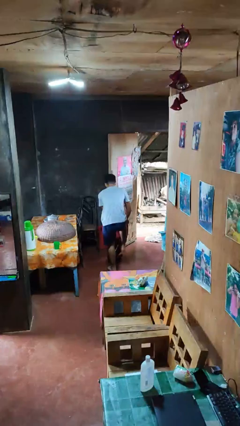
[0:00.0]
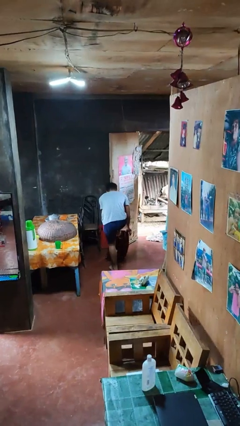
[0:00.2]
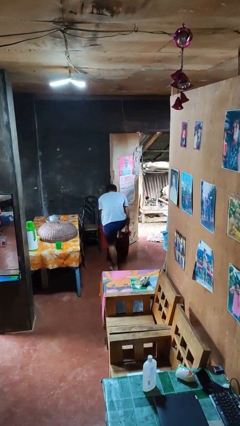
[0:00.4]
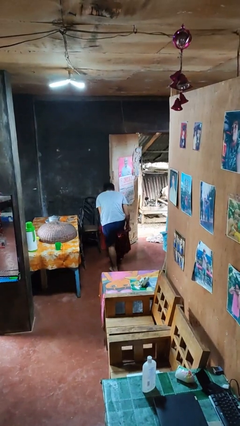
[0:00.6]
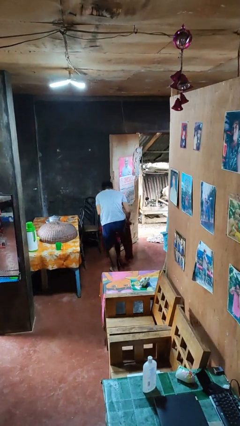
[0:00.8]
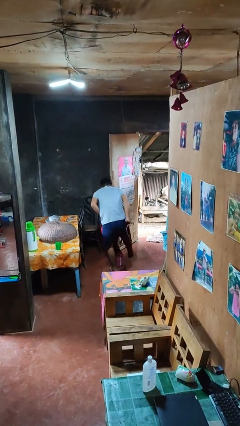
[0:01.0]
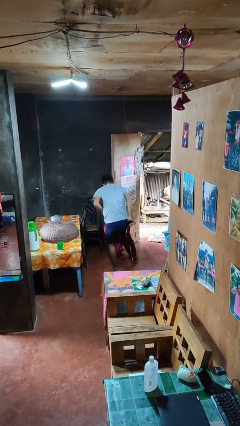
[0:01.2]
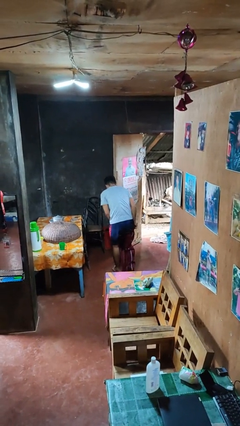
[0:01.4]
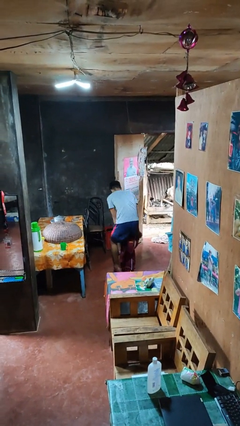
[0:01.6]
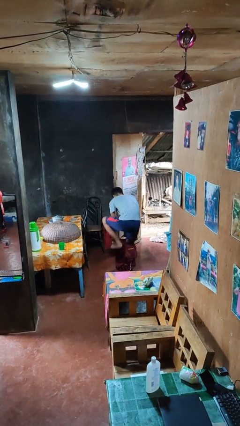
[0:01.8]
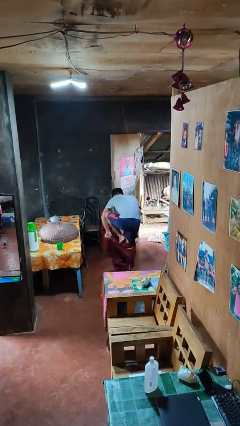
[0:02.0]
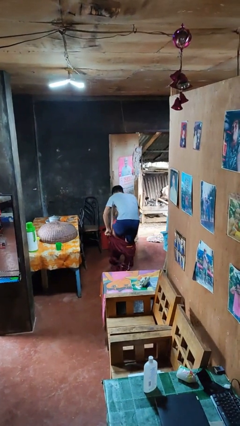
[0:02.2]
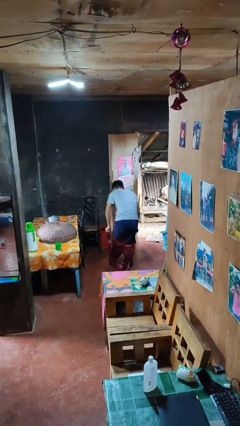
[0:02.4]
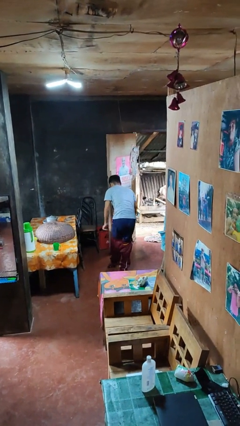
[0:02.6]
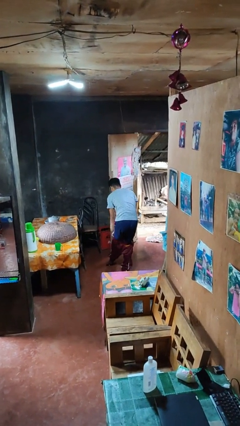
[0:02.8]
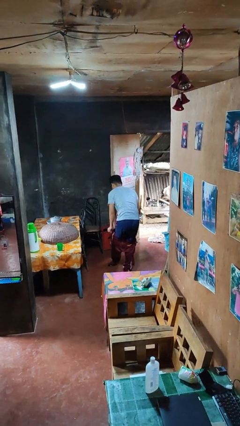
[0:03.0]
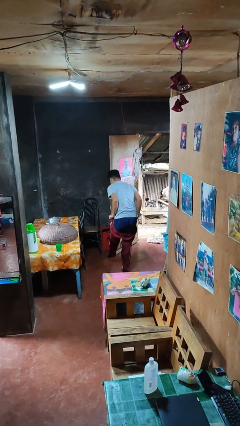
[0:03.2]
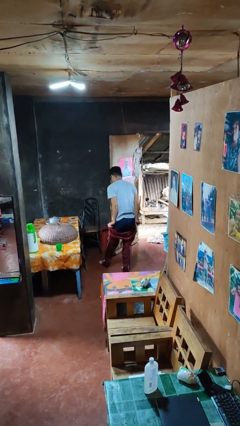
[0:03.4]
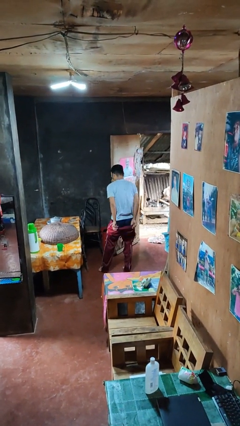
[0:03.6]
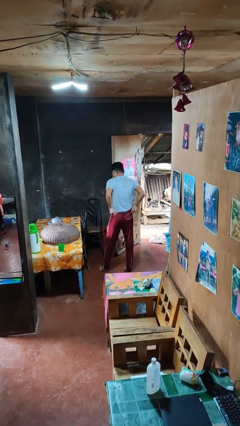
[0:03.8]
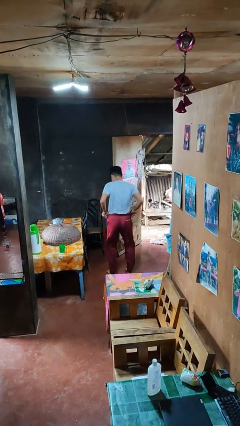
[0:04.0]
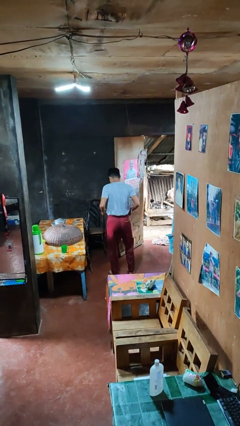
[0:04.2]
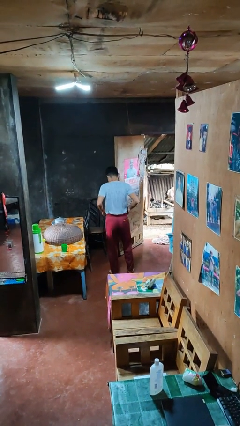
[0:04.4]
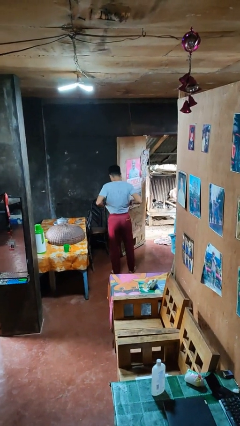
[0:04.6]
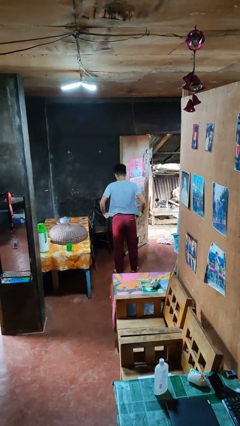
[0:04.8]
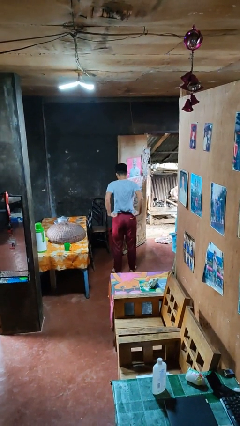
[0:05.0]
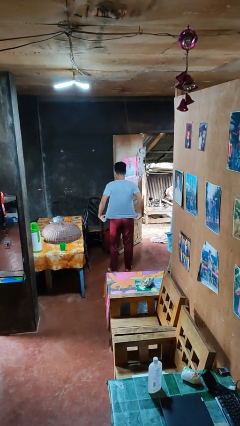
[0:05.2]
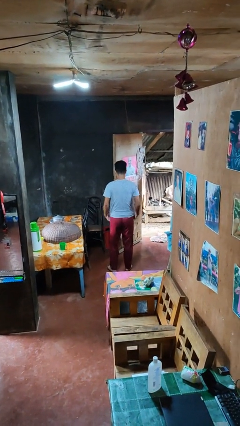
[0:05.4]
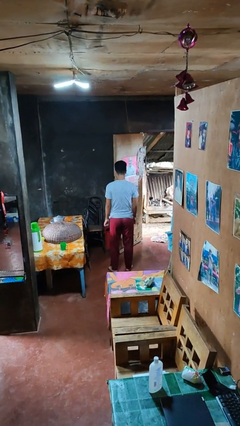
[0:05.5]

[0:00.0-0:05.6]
person puts on pants

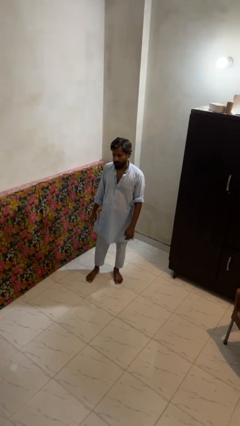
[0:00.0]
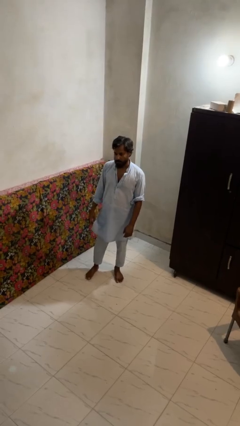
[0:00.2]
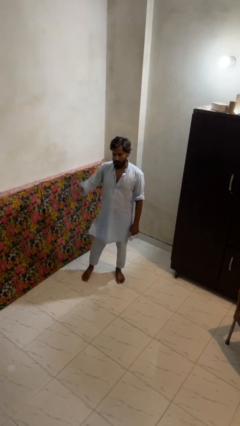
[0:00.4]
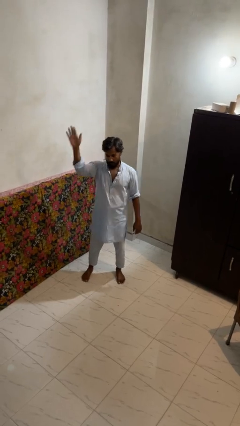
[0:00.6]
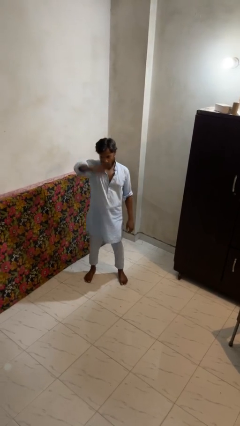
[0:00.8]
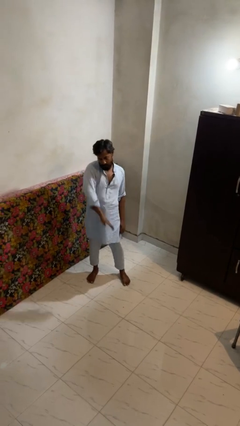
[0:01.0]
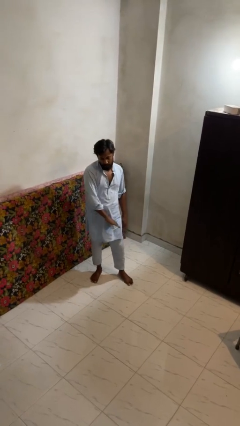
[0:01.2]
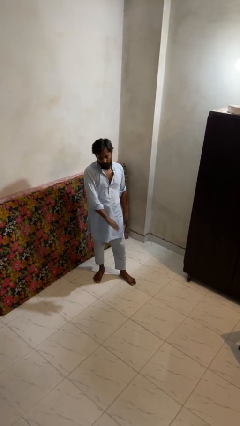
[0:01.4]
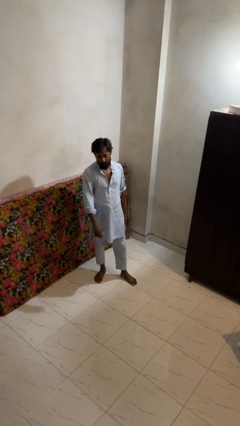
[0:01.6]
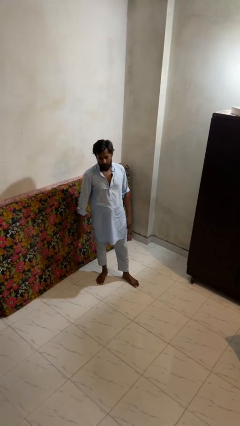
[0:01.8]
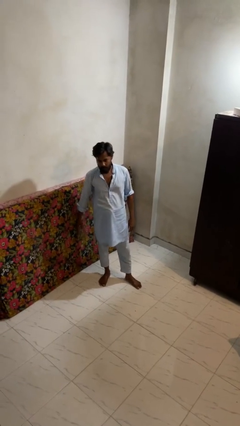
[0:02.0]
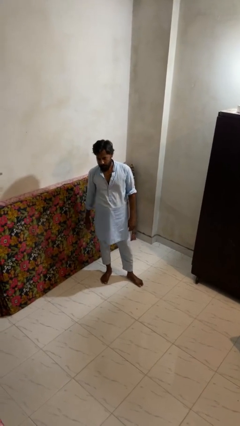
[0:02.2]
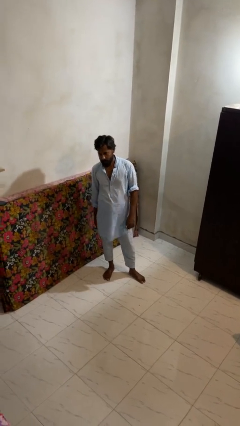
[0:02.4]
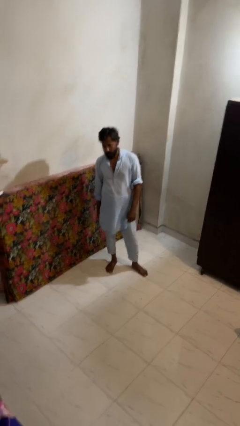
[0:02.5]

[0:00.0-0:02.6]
person gestures swipe down

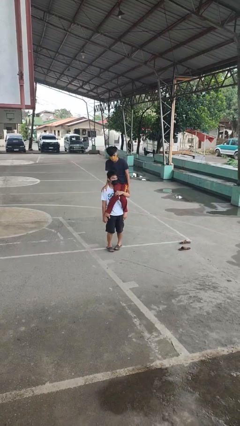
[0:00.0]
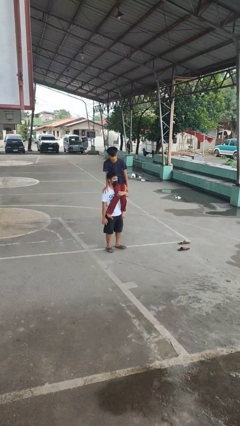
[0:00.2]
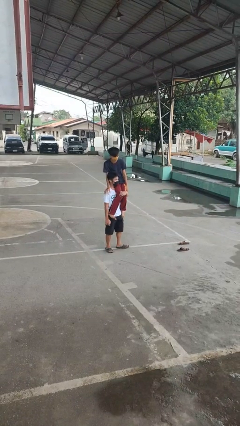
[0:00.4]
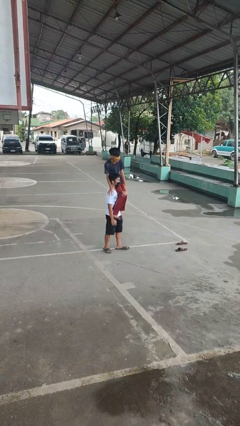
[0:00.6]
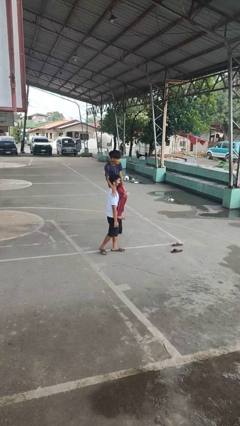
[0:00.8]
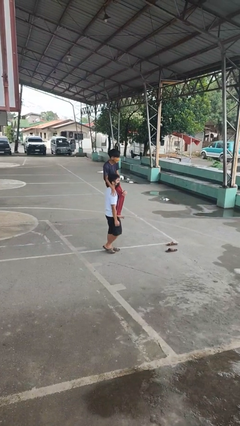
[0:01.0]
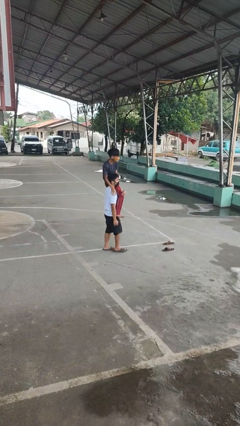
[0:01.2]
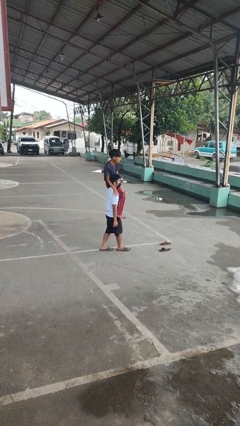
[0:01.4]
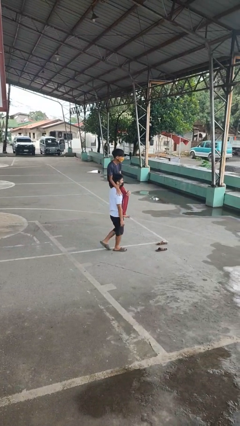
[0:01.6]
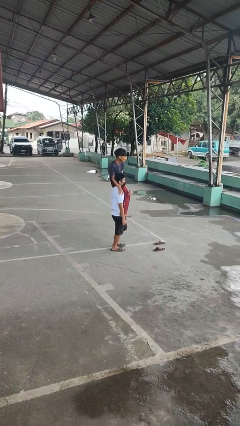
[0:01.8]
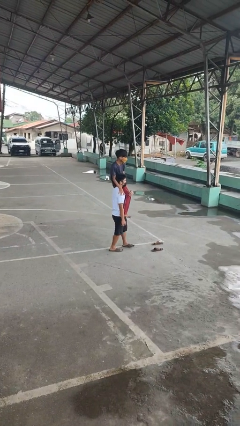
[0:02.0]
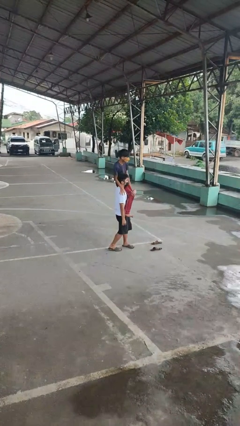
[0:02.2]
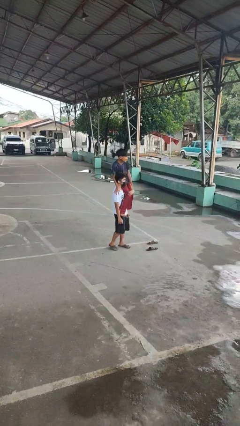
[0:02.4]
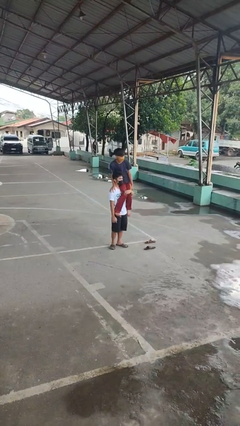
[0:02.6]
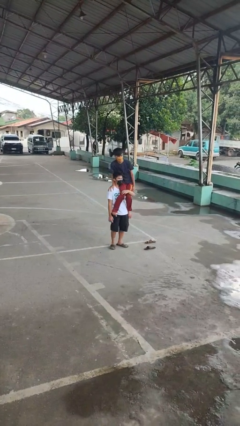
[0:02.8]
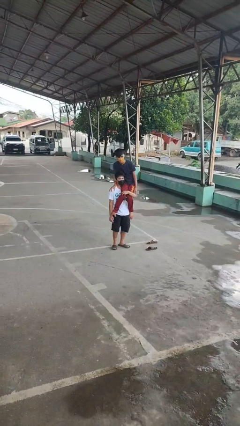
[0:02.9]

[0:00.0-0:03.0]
person carries person on shoulders

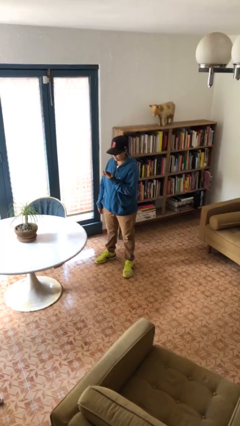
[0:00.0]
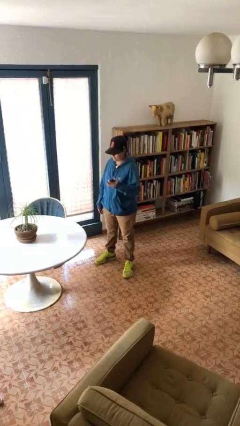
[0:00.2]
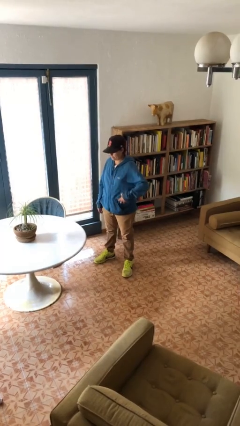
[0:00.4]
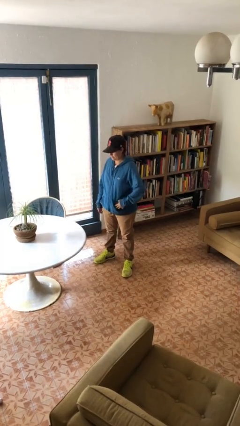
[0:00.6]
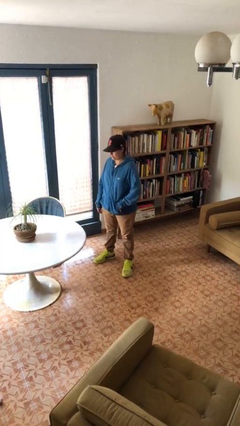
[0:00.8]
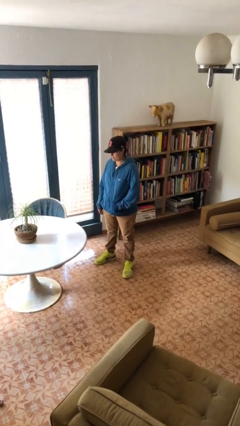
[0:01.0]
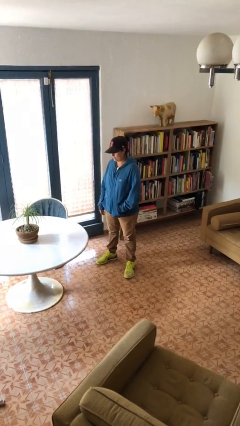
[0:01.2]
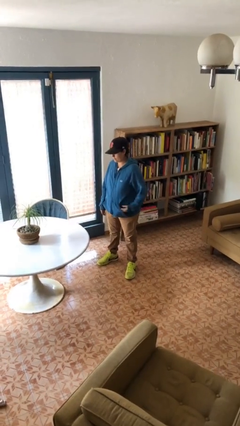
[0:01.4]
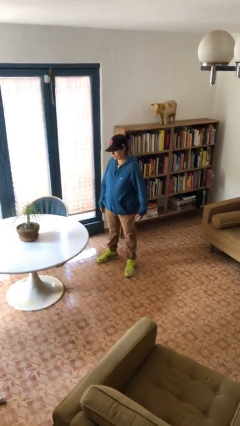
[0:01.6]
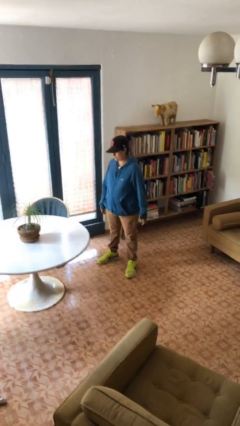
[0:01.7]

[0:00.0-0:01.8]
person puts phone into pocket

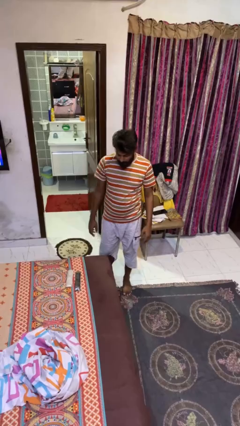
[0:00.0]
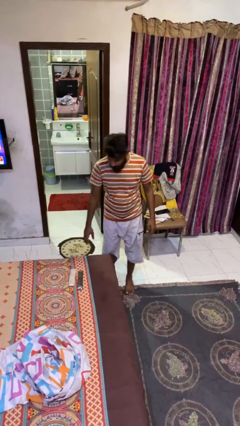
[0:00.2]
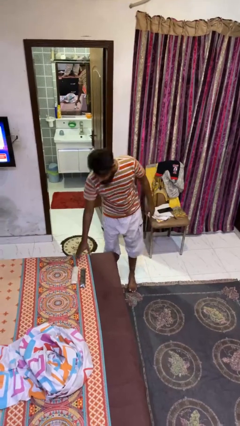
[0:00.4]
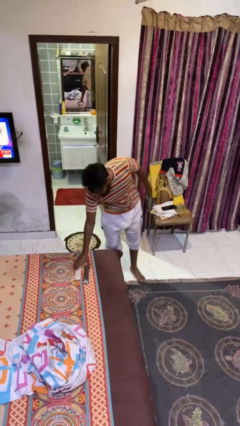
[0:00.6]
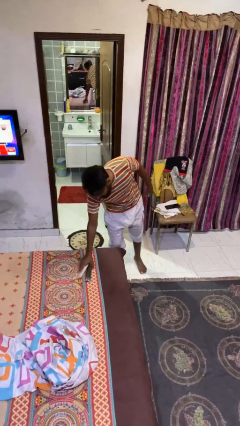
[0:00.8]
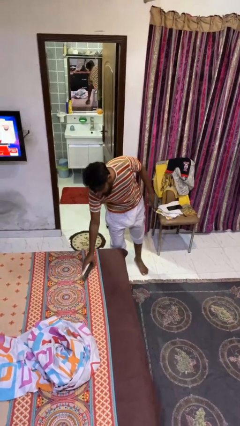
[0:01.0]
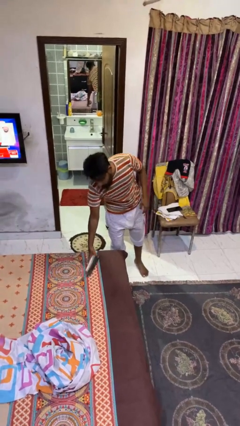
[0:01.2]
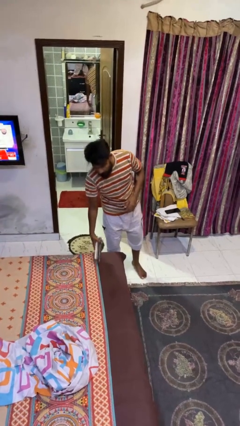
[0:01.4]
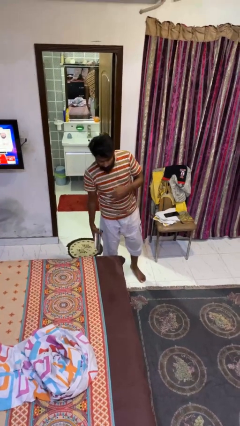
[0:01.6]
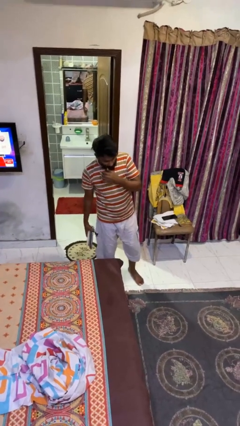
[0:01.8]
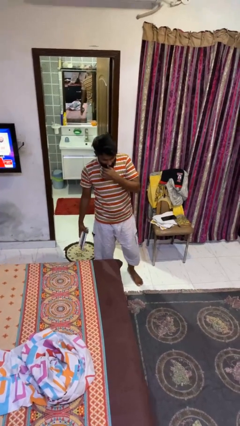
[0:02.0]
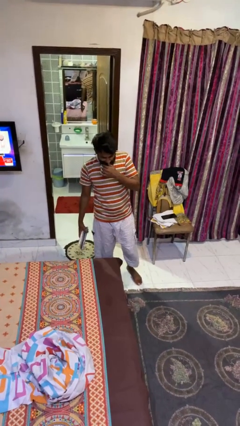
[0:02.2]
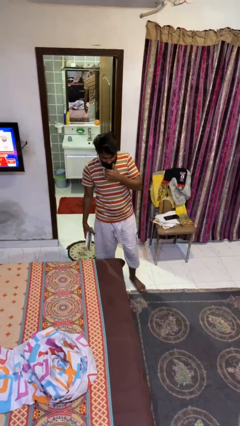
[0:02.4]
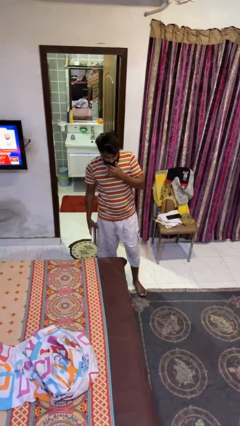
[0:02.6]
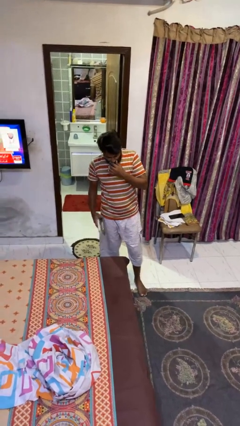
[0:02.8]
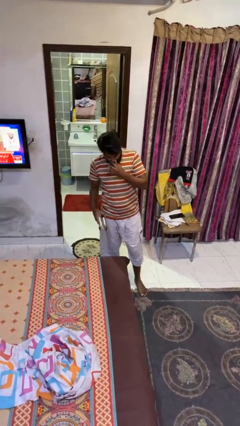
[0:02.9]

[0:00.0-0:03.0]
person picks up object from bed

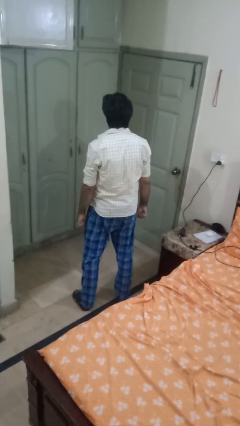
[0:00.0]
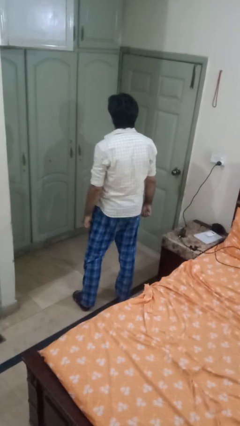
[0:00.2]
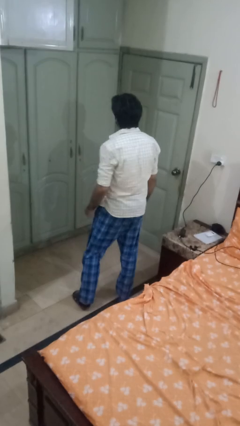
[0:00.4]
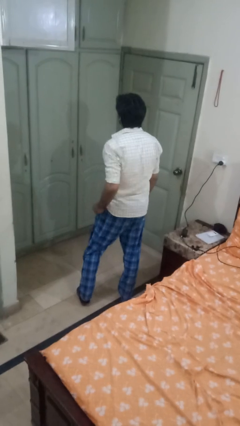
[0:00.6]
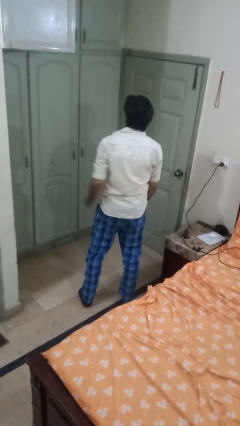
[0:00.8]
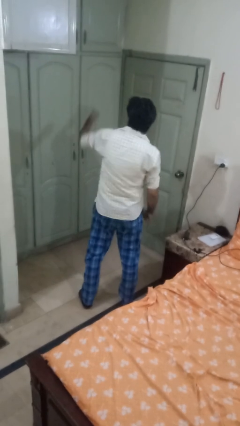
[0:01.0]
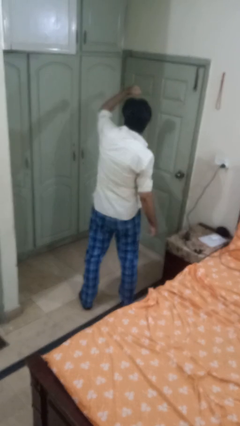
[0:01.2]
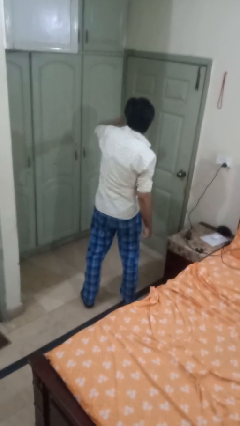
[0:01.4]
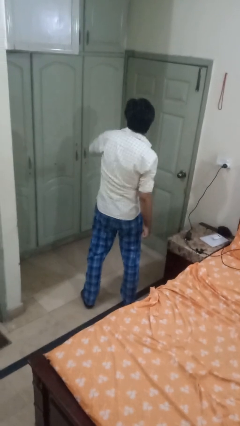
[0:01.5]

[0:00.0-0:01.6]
person punches
